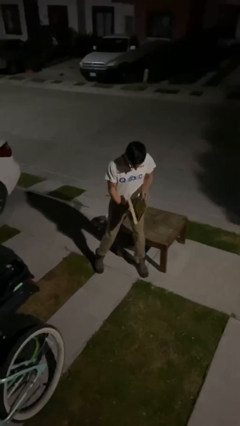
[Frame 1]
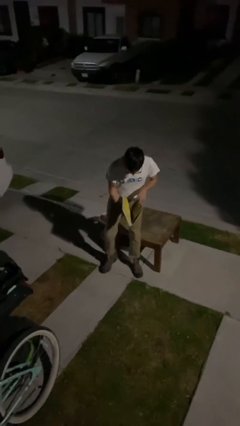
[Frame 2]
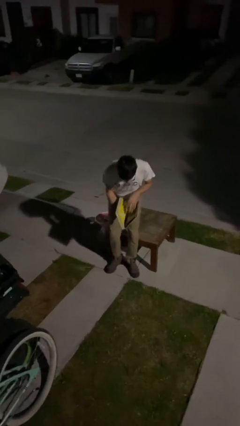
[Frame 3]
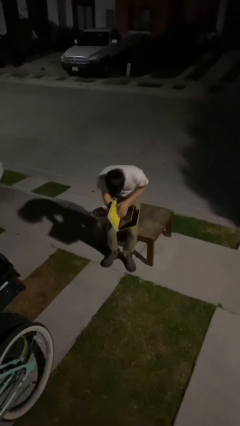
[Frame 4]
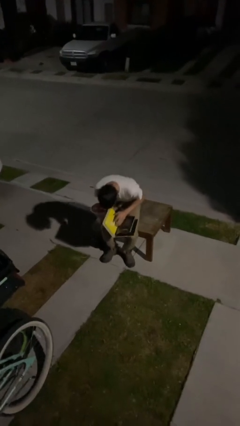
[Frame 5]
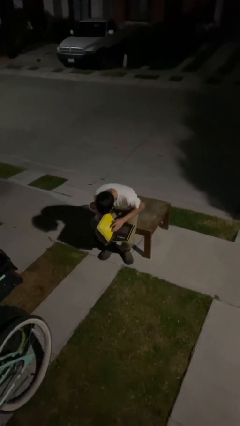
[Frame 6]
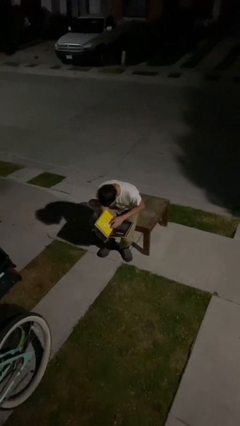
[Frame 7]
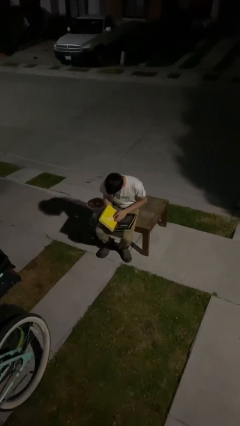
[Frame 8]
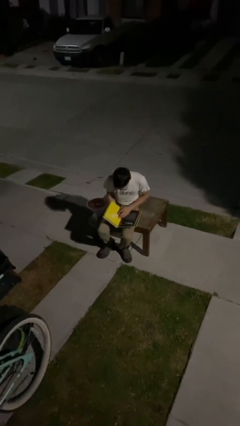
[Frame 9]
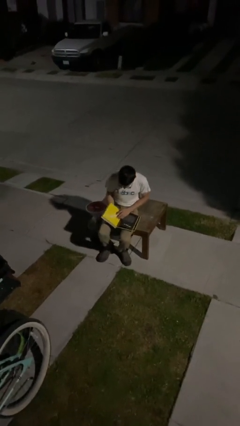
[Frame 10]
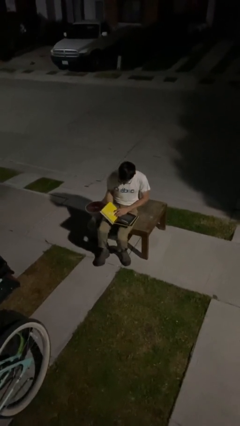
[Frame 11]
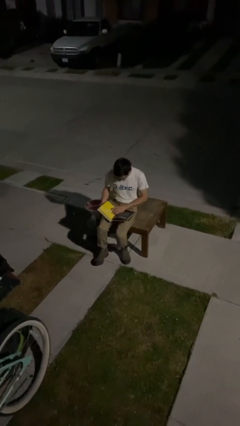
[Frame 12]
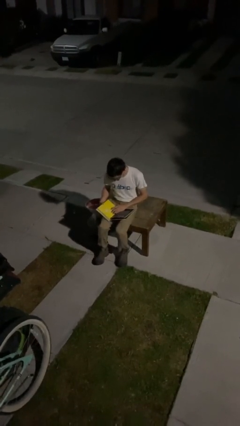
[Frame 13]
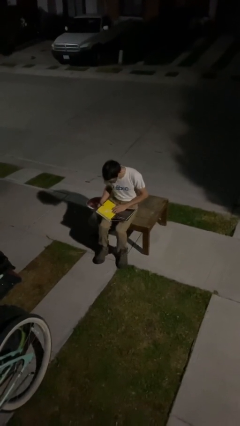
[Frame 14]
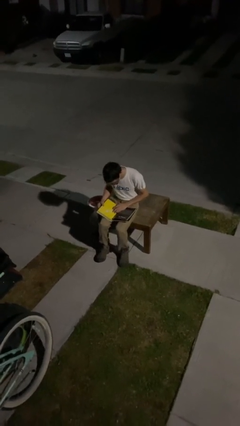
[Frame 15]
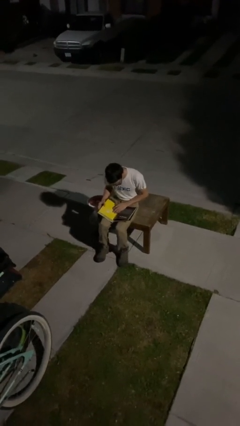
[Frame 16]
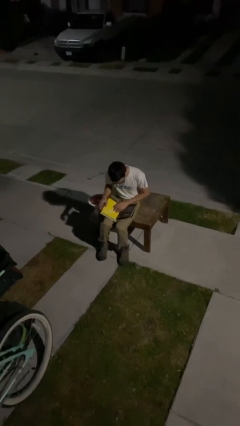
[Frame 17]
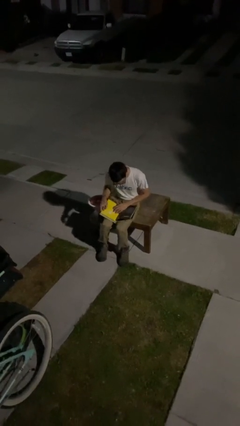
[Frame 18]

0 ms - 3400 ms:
person sits down

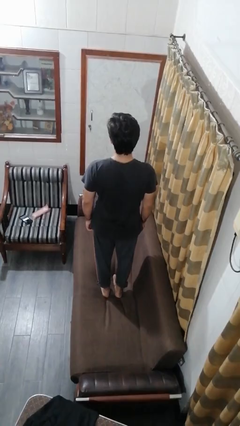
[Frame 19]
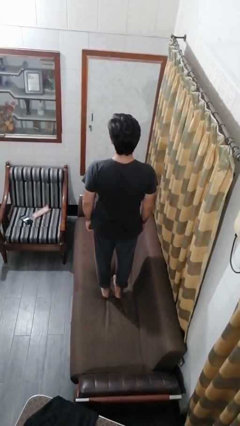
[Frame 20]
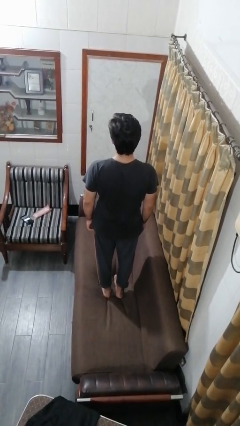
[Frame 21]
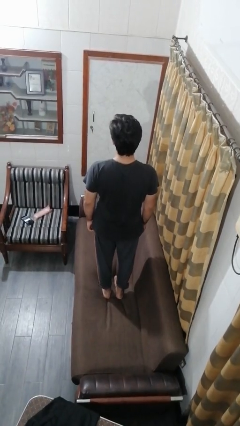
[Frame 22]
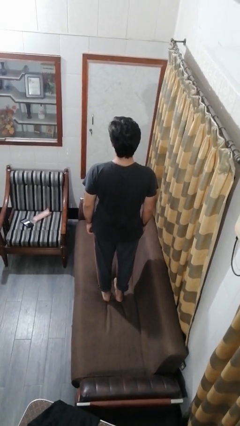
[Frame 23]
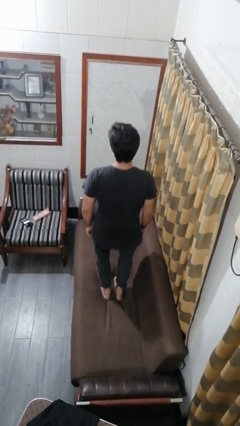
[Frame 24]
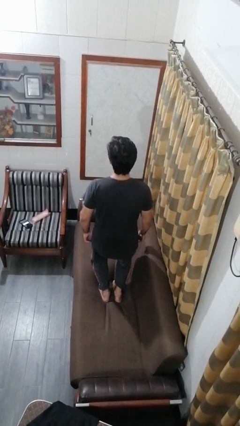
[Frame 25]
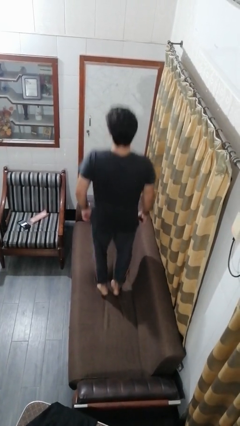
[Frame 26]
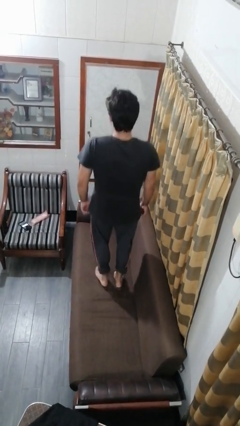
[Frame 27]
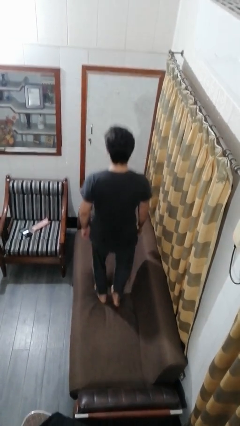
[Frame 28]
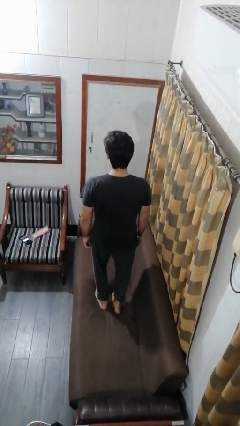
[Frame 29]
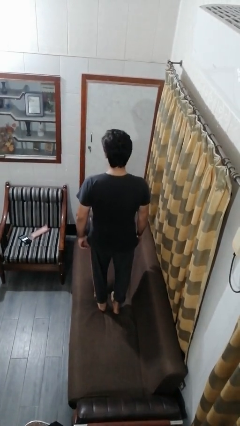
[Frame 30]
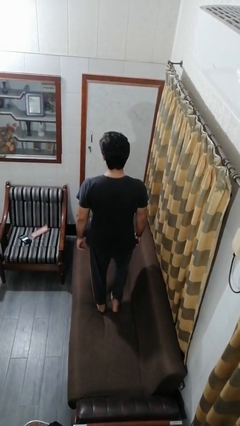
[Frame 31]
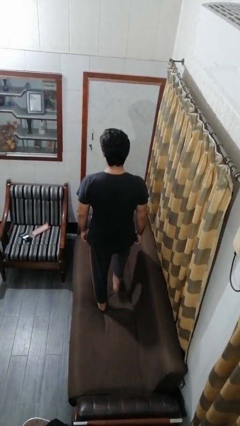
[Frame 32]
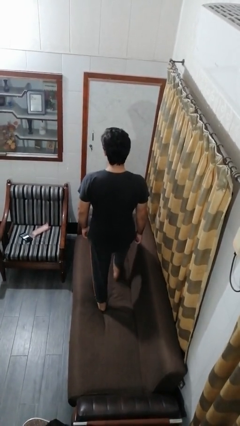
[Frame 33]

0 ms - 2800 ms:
person jumps on couch

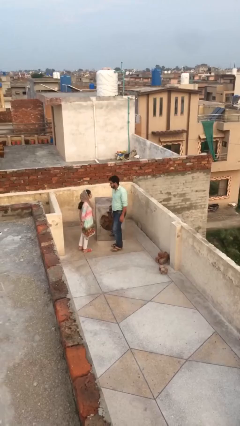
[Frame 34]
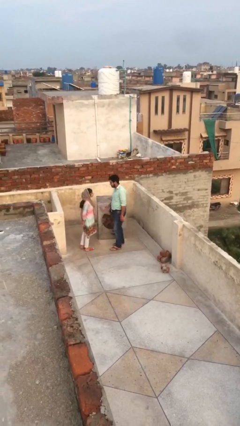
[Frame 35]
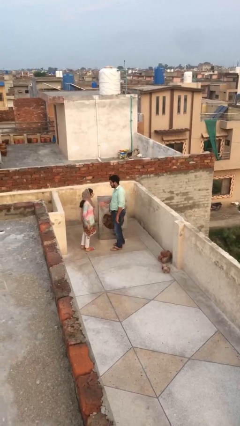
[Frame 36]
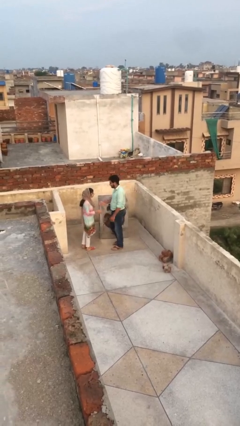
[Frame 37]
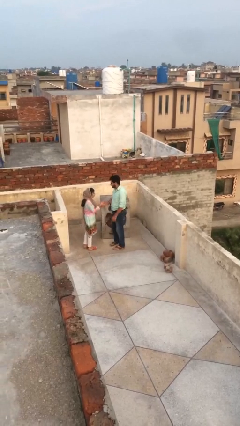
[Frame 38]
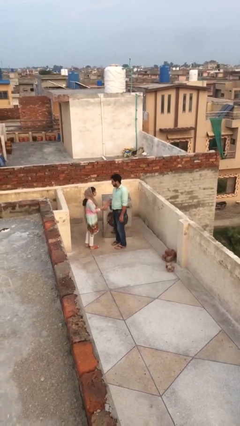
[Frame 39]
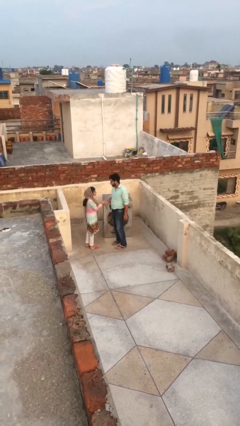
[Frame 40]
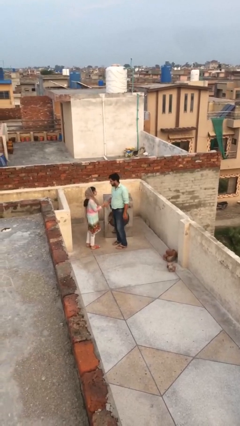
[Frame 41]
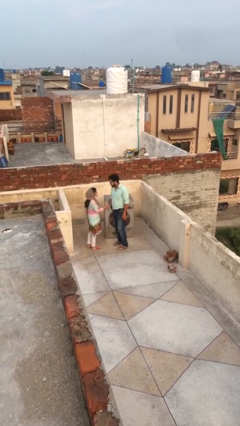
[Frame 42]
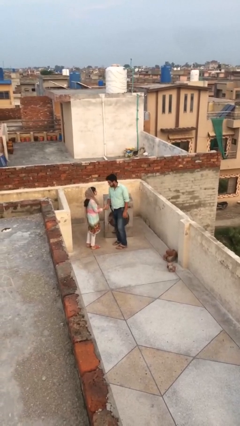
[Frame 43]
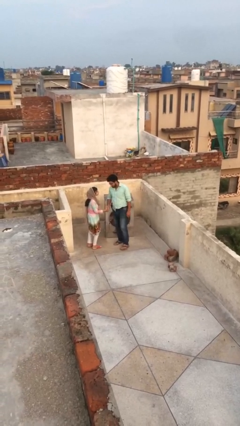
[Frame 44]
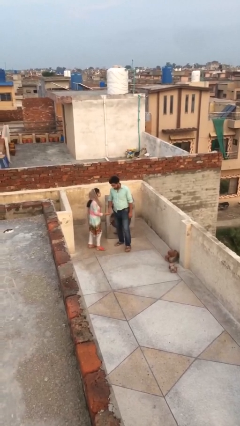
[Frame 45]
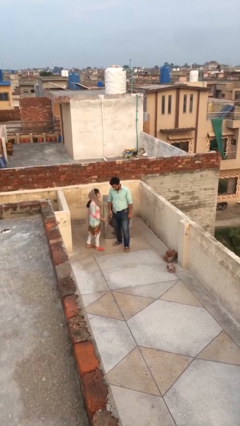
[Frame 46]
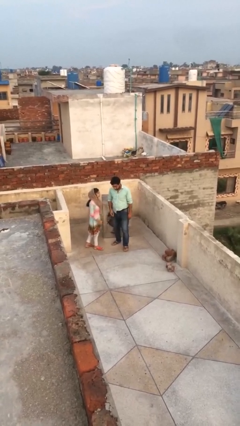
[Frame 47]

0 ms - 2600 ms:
person shakes hand

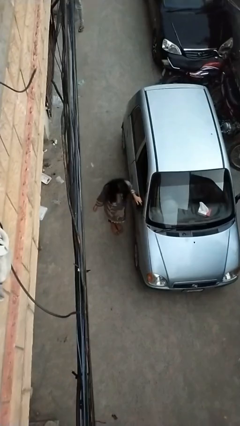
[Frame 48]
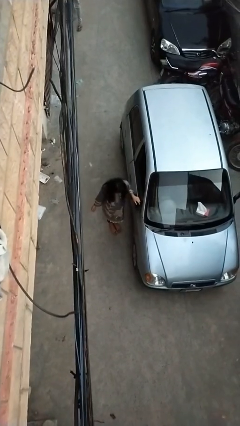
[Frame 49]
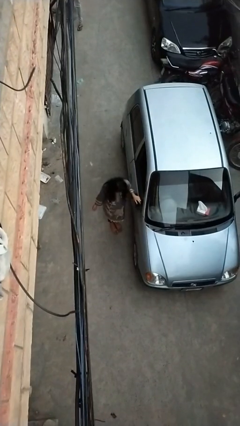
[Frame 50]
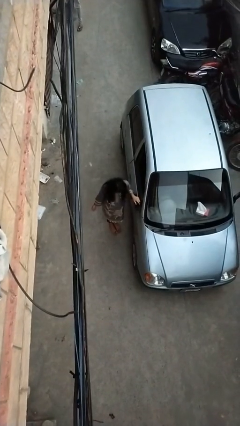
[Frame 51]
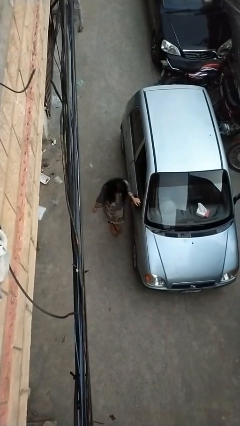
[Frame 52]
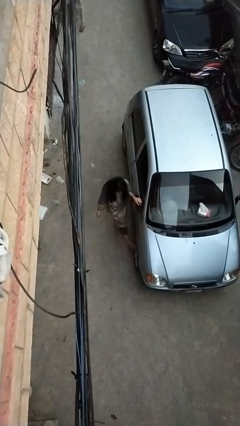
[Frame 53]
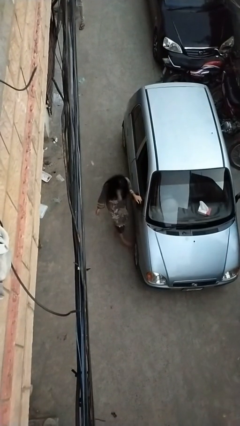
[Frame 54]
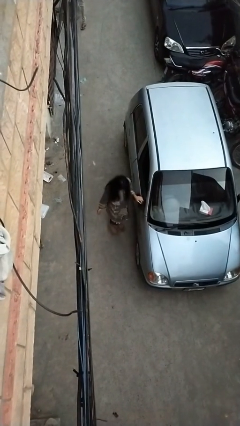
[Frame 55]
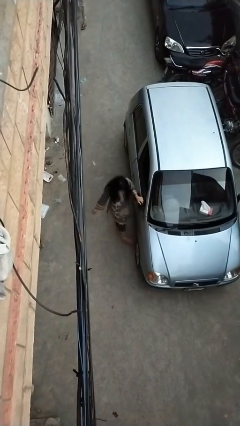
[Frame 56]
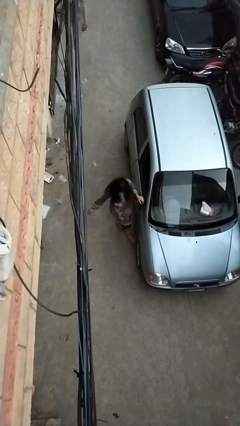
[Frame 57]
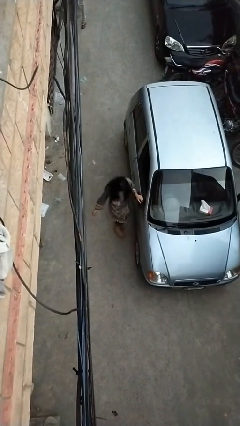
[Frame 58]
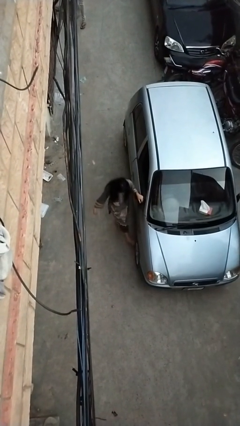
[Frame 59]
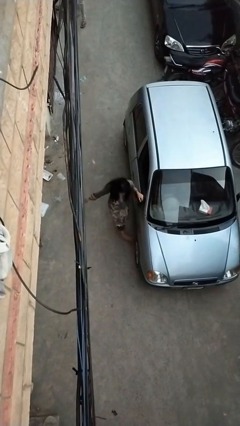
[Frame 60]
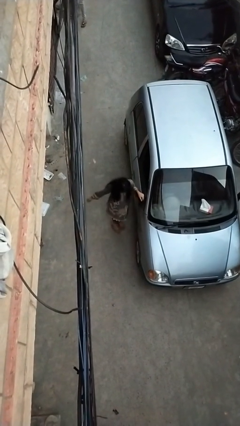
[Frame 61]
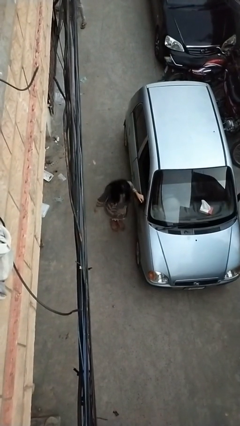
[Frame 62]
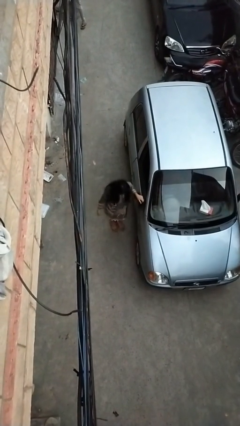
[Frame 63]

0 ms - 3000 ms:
person kicks car tires

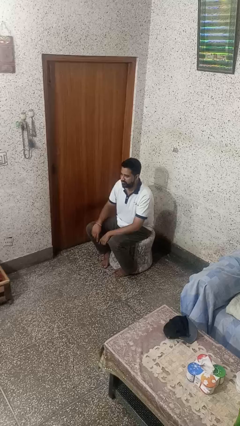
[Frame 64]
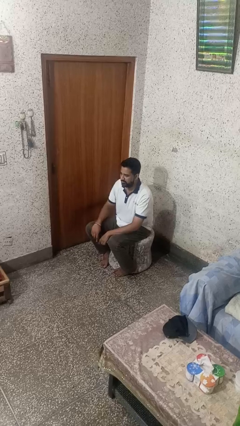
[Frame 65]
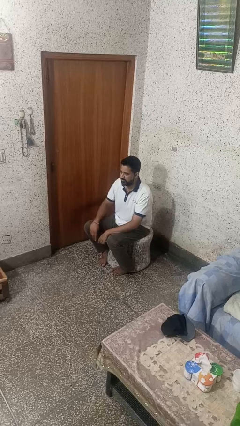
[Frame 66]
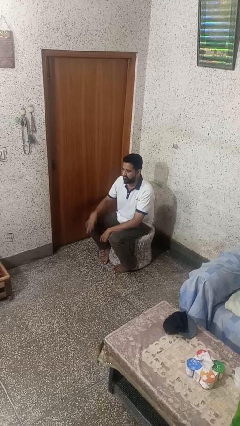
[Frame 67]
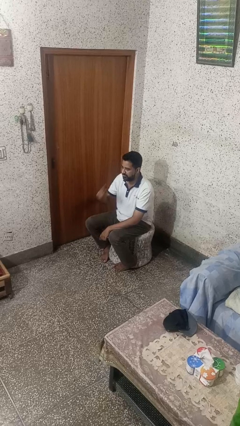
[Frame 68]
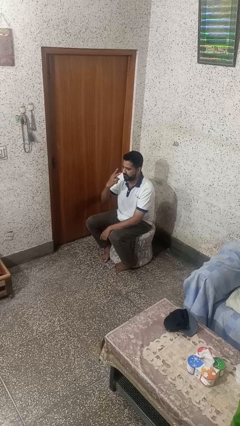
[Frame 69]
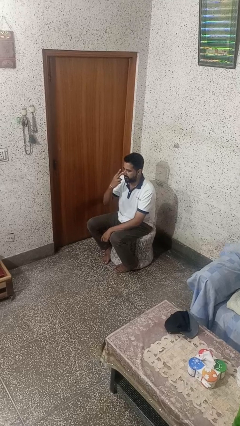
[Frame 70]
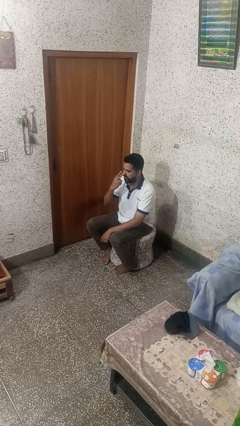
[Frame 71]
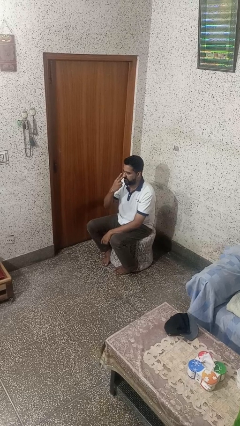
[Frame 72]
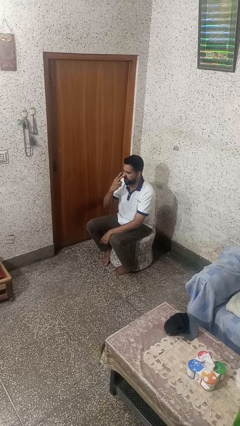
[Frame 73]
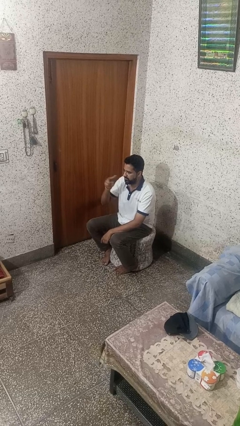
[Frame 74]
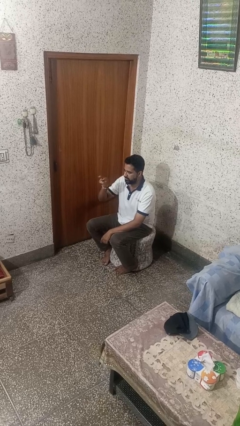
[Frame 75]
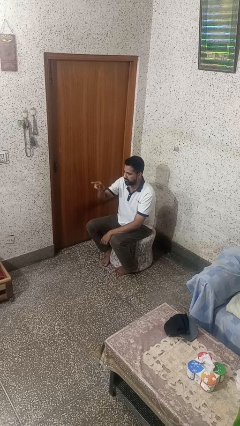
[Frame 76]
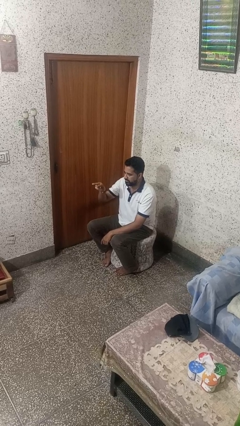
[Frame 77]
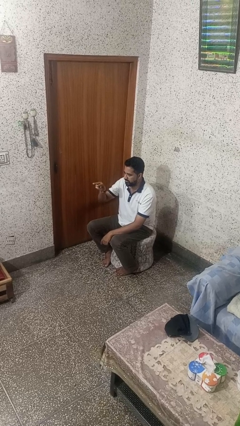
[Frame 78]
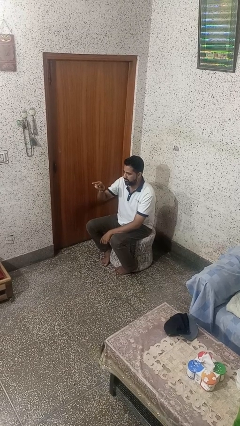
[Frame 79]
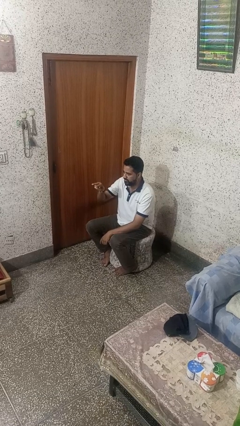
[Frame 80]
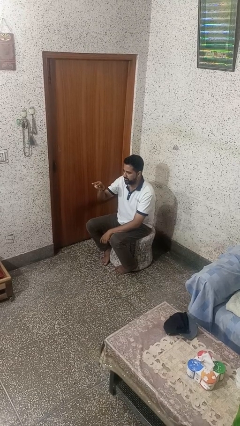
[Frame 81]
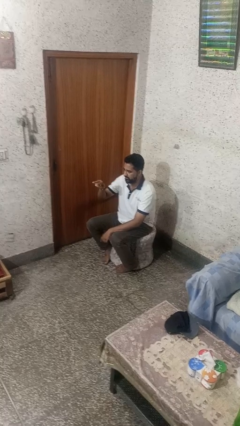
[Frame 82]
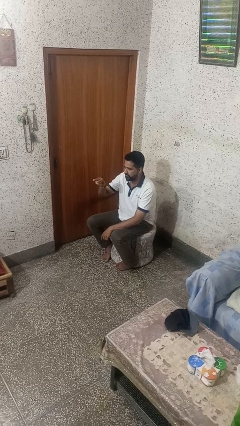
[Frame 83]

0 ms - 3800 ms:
person gestures watch closely

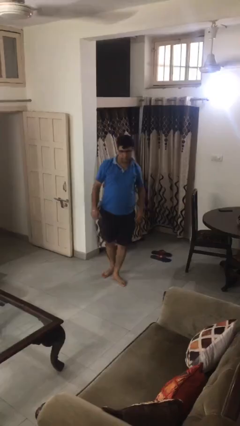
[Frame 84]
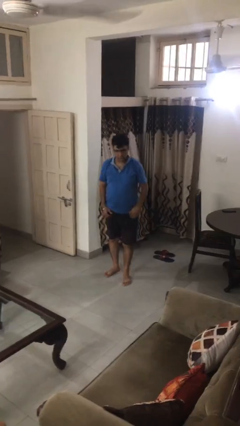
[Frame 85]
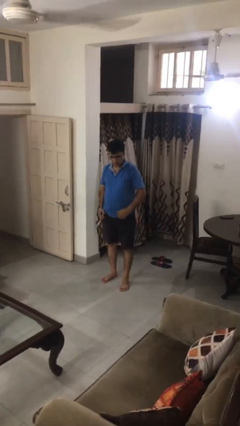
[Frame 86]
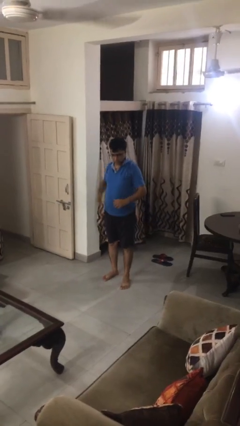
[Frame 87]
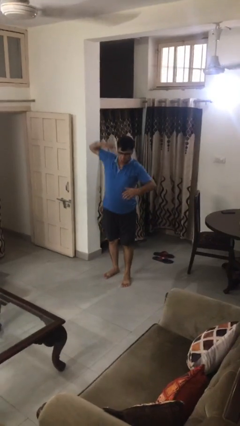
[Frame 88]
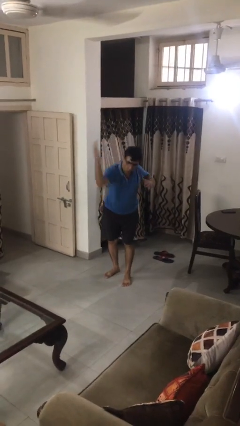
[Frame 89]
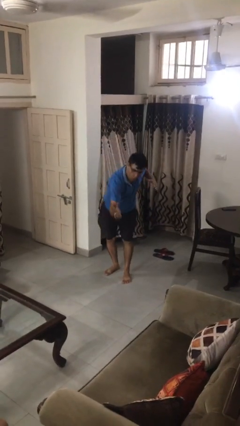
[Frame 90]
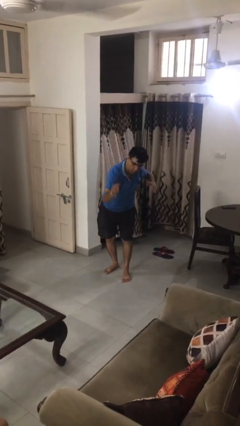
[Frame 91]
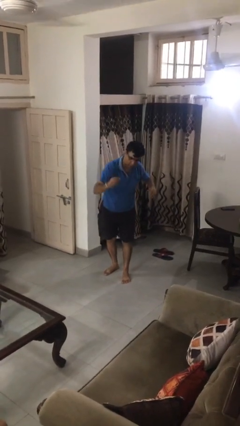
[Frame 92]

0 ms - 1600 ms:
person karate chop
